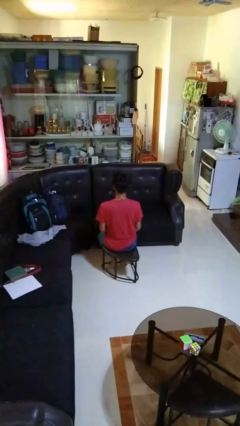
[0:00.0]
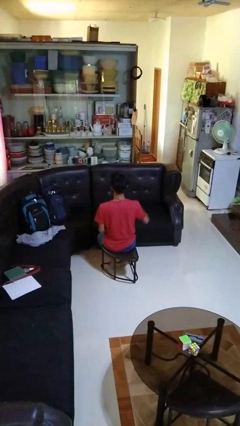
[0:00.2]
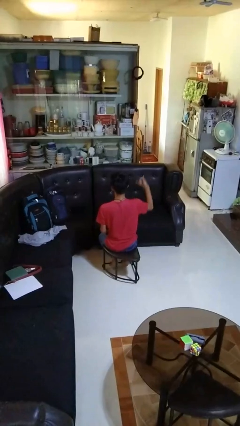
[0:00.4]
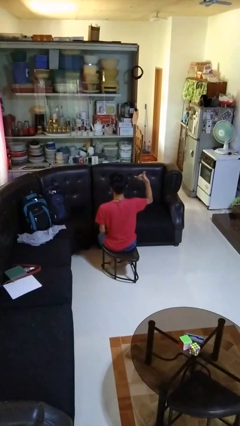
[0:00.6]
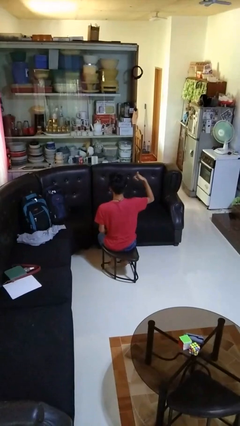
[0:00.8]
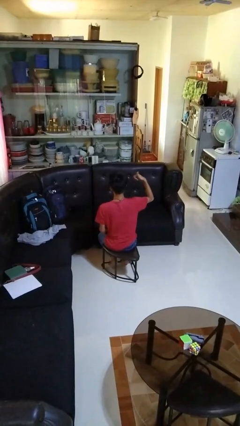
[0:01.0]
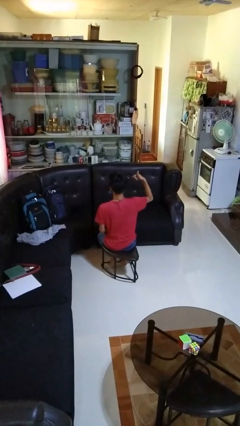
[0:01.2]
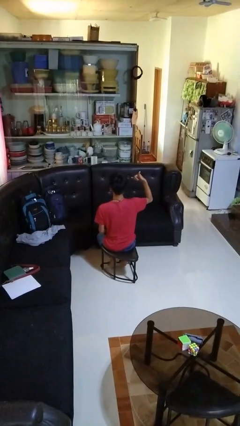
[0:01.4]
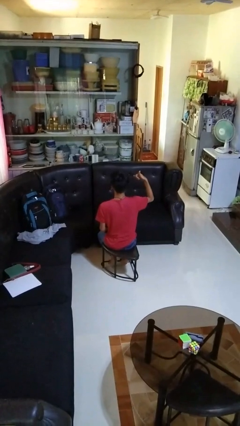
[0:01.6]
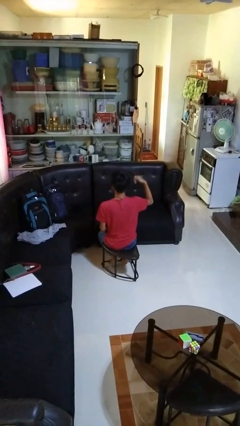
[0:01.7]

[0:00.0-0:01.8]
person gestures hang loose

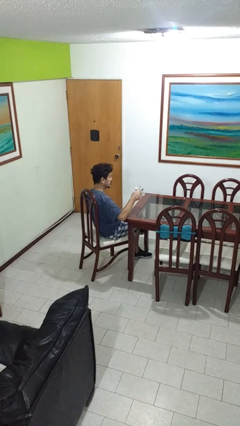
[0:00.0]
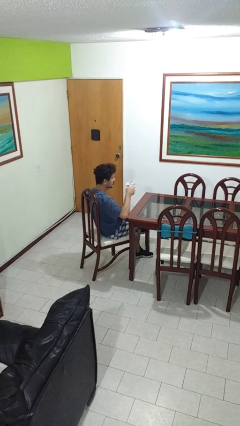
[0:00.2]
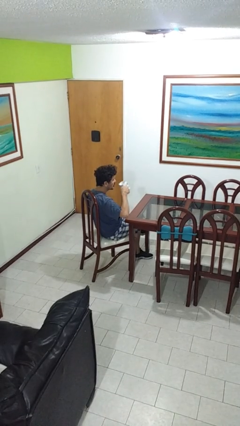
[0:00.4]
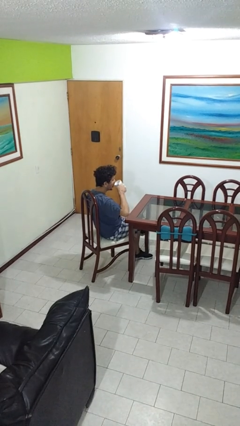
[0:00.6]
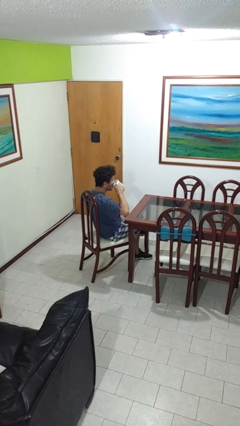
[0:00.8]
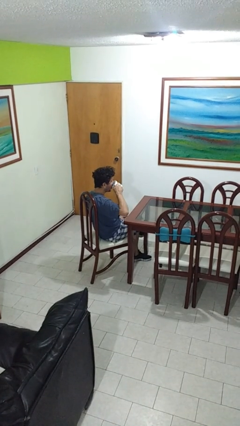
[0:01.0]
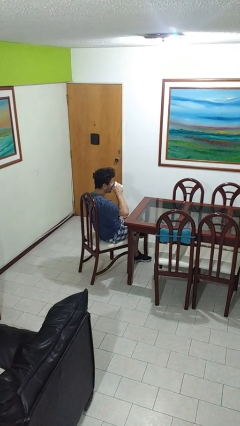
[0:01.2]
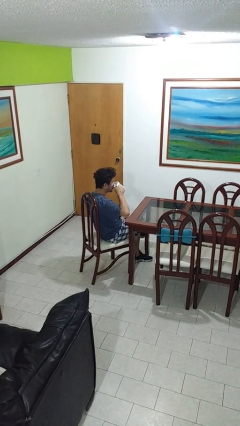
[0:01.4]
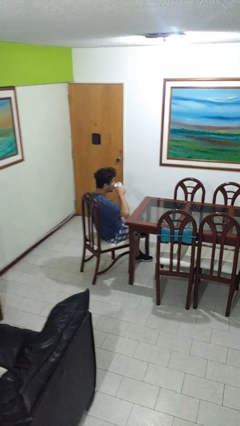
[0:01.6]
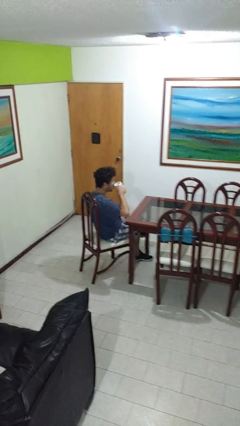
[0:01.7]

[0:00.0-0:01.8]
person drinks from mug

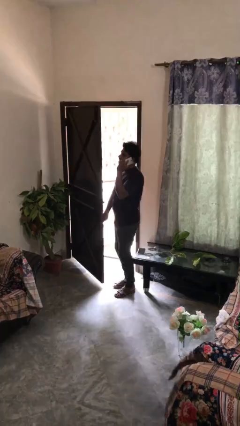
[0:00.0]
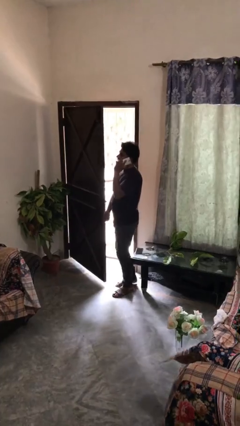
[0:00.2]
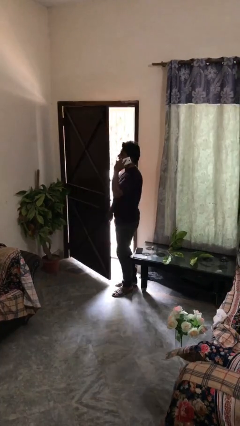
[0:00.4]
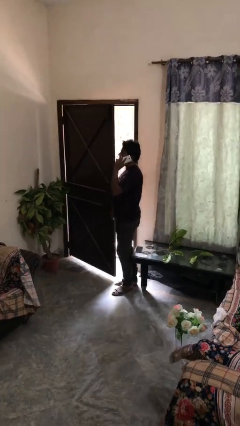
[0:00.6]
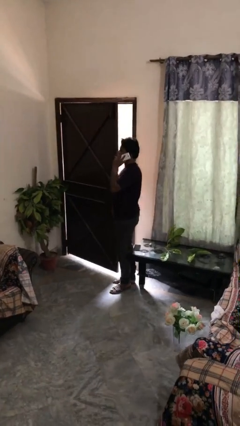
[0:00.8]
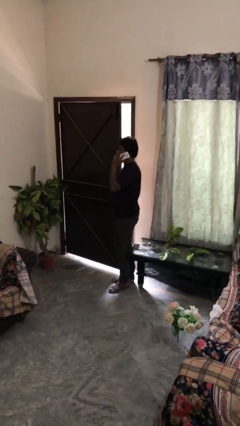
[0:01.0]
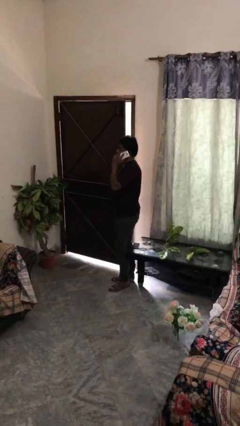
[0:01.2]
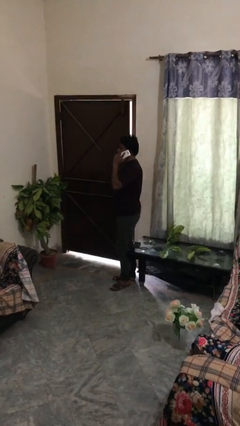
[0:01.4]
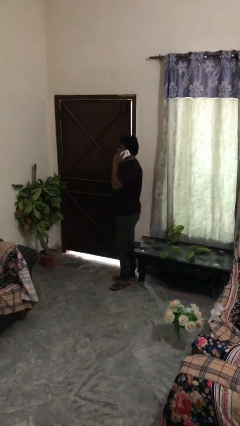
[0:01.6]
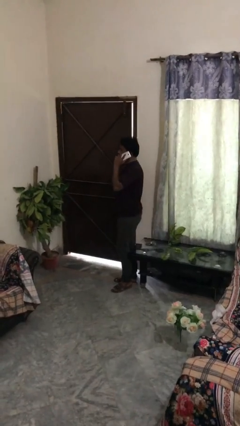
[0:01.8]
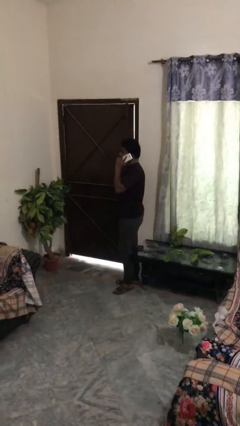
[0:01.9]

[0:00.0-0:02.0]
person closes facility door

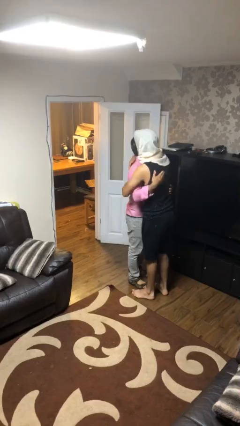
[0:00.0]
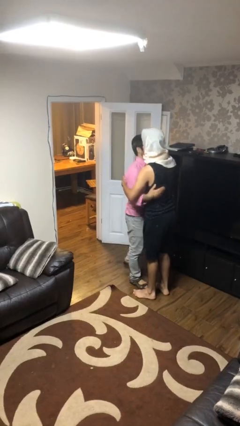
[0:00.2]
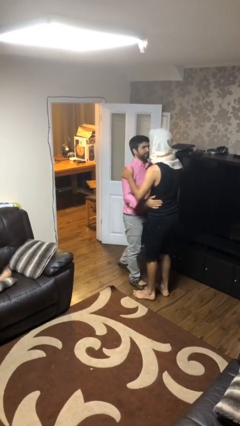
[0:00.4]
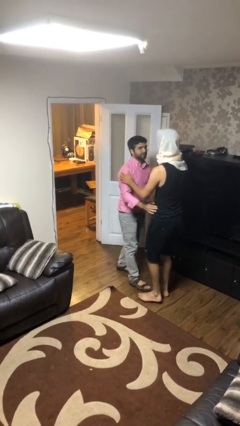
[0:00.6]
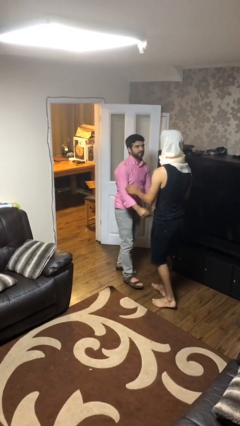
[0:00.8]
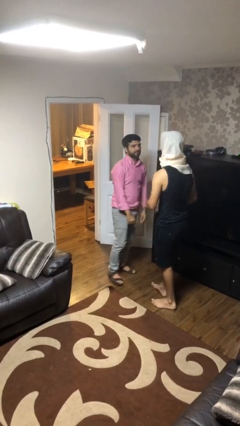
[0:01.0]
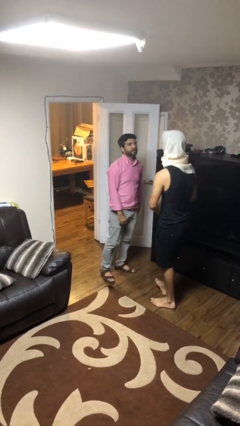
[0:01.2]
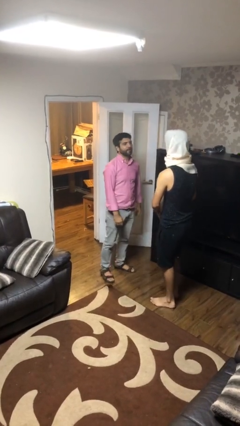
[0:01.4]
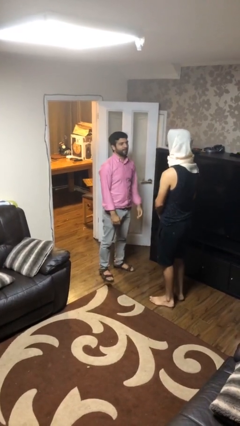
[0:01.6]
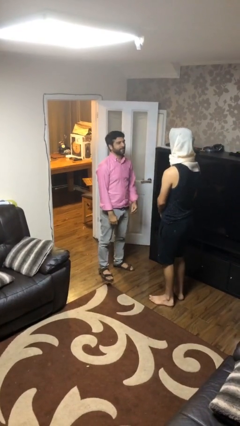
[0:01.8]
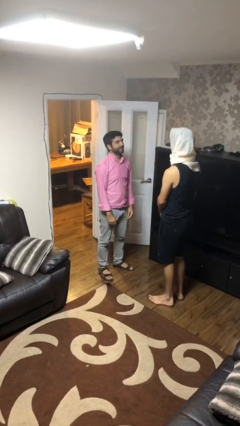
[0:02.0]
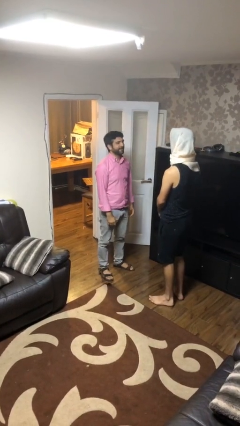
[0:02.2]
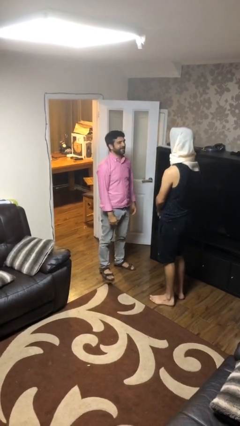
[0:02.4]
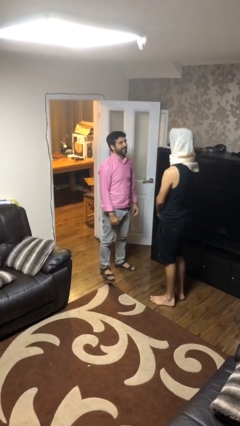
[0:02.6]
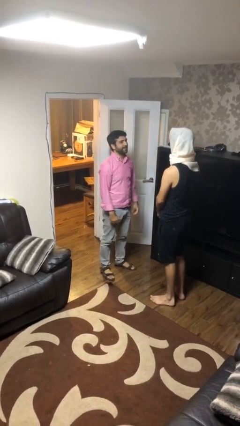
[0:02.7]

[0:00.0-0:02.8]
person talks to person

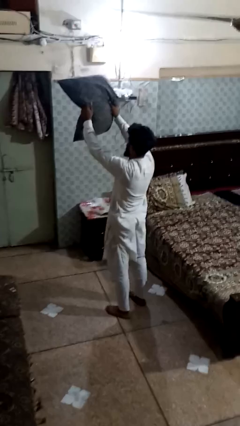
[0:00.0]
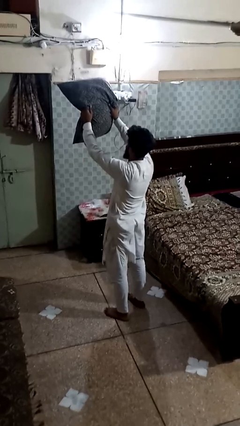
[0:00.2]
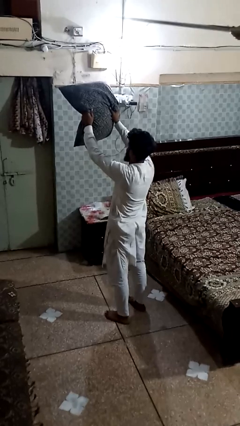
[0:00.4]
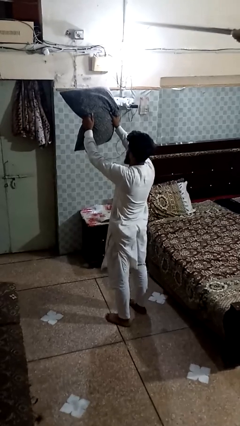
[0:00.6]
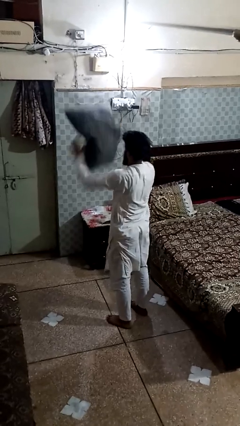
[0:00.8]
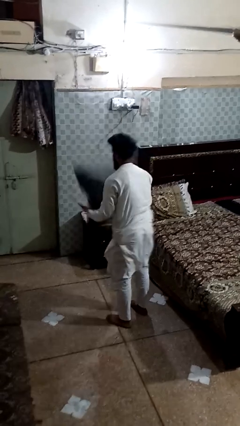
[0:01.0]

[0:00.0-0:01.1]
person drops object

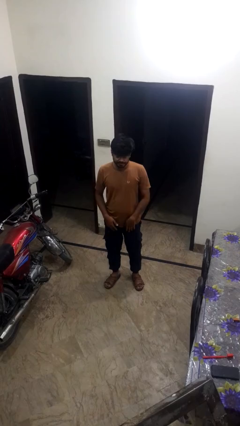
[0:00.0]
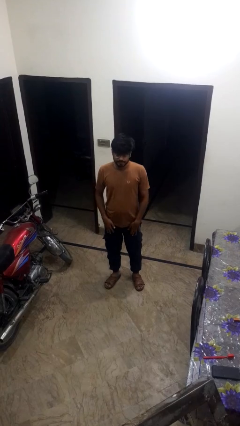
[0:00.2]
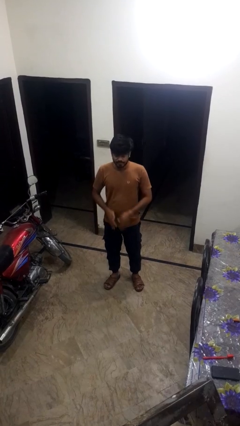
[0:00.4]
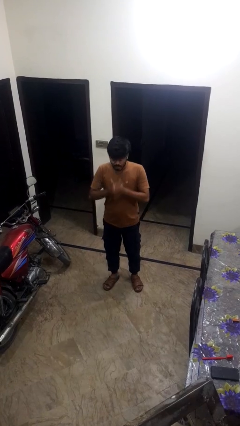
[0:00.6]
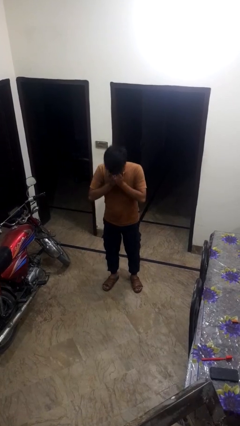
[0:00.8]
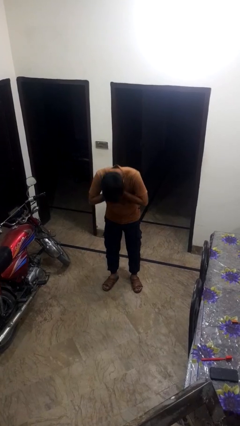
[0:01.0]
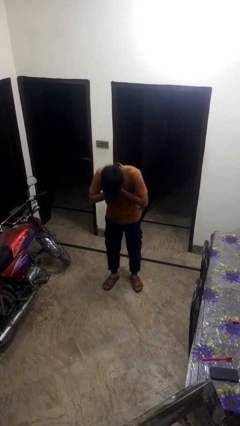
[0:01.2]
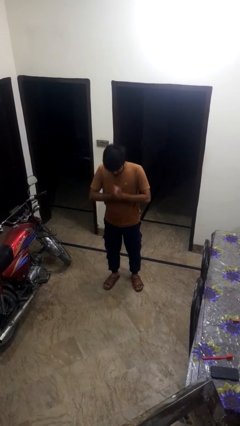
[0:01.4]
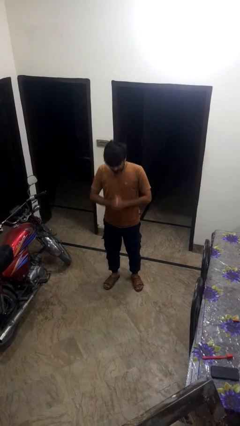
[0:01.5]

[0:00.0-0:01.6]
person sneezes into hand

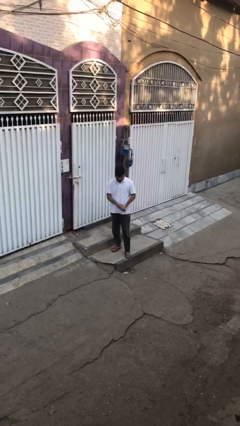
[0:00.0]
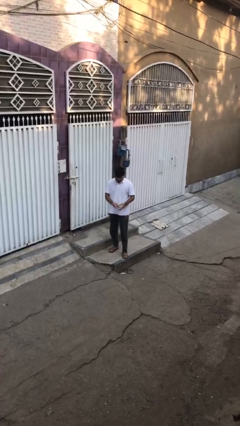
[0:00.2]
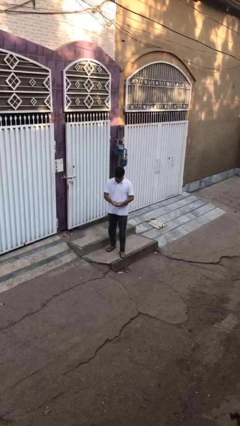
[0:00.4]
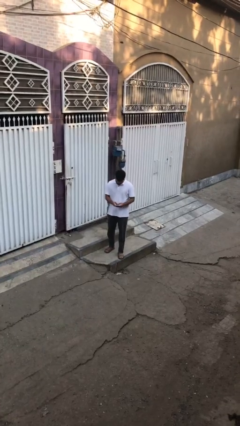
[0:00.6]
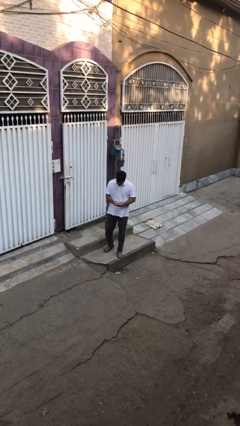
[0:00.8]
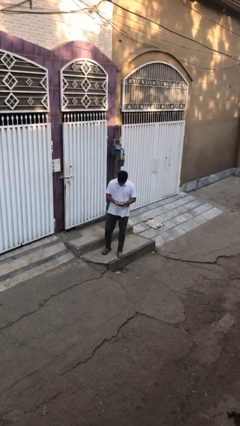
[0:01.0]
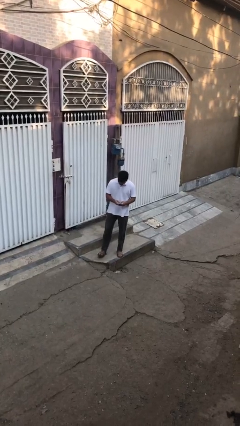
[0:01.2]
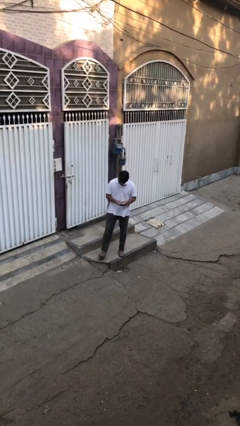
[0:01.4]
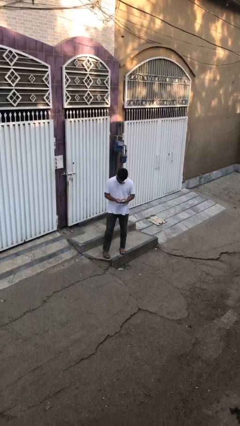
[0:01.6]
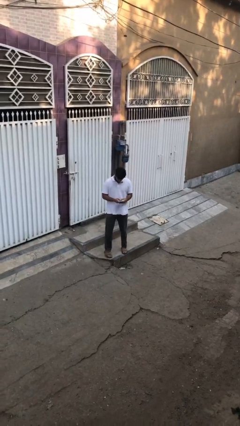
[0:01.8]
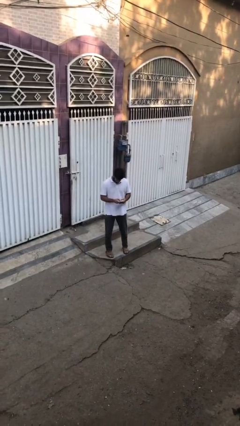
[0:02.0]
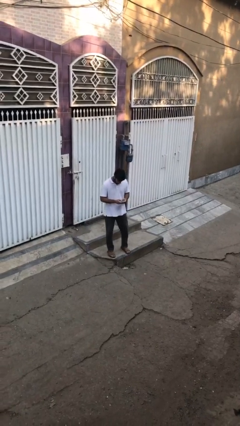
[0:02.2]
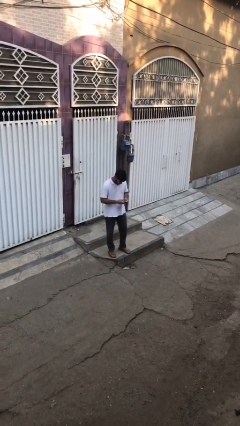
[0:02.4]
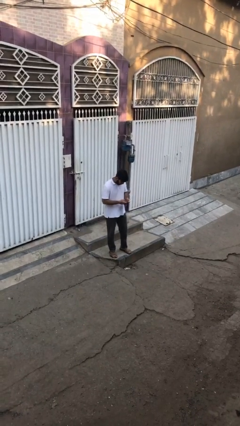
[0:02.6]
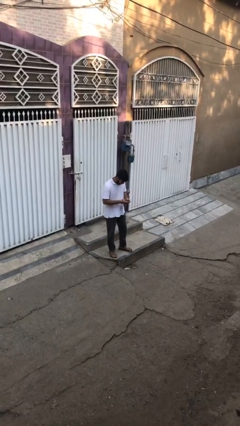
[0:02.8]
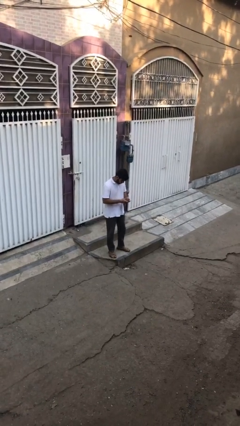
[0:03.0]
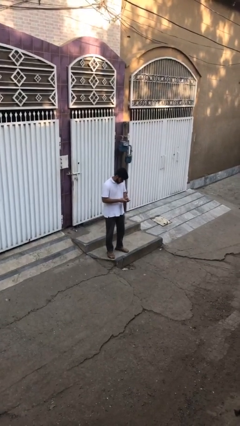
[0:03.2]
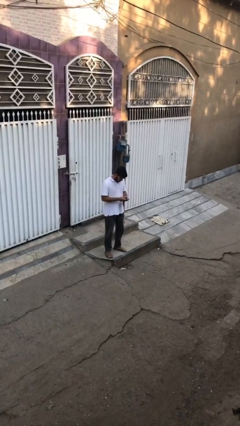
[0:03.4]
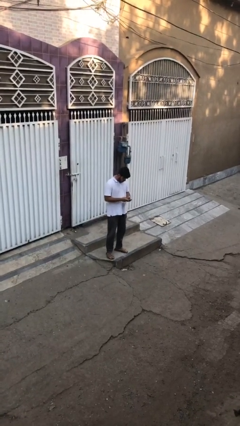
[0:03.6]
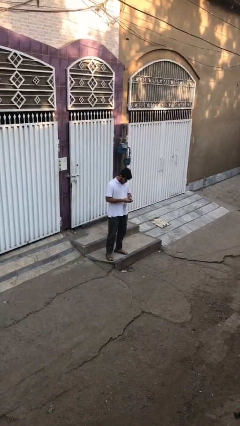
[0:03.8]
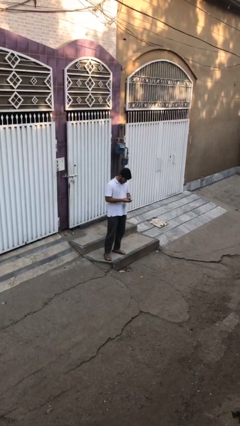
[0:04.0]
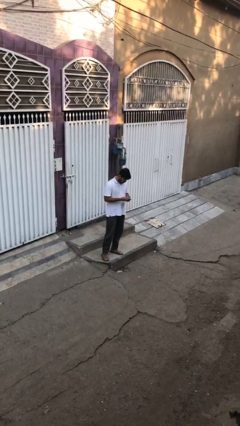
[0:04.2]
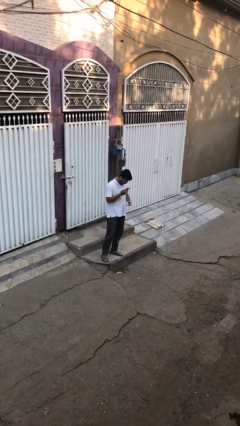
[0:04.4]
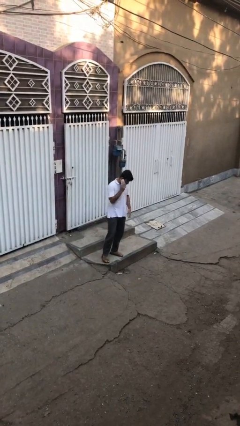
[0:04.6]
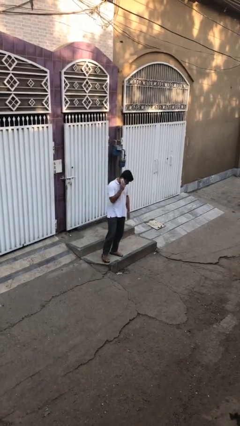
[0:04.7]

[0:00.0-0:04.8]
person texts on phone

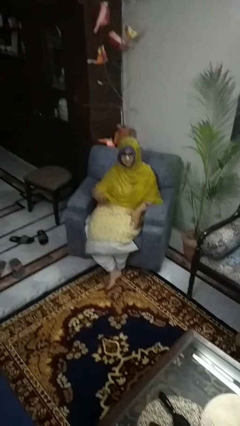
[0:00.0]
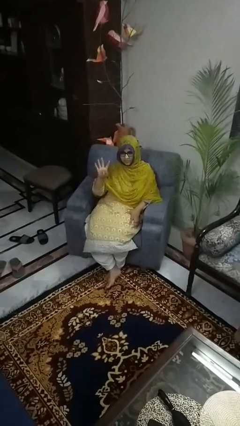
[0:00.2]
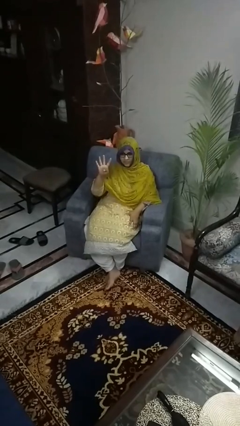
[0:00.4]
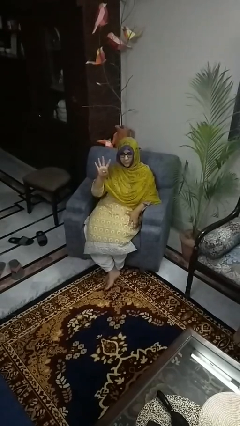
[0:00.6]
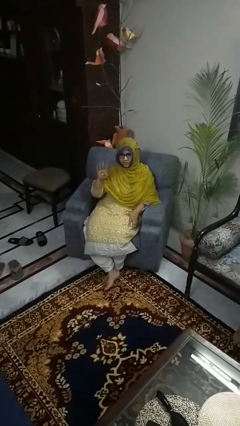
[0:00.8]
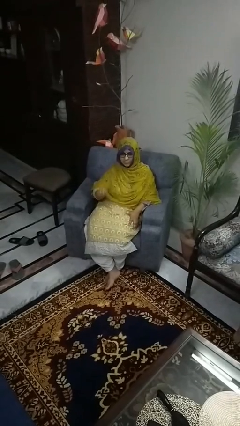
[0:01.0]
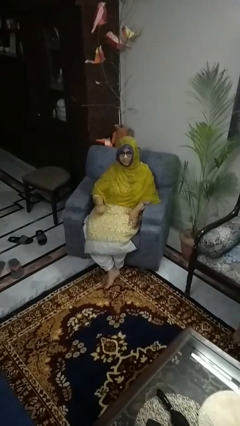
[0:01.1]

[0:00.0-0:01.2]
person gestures number four
